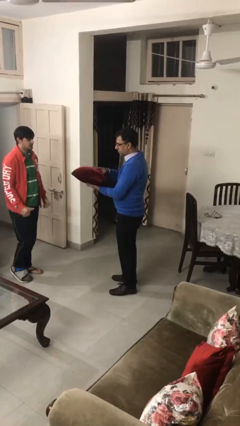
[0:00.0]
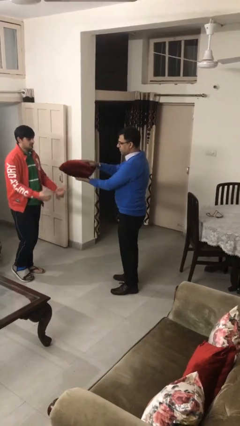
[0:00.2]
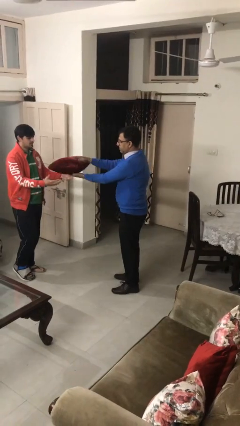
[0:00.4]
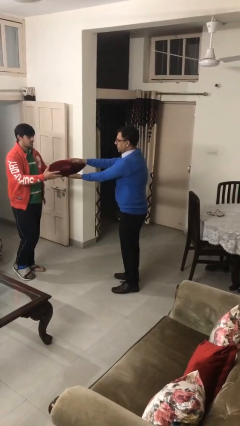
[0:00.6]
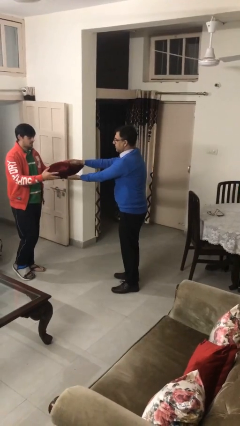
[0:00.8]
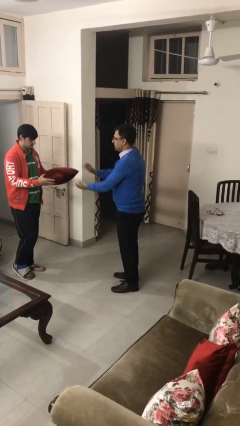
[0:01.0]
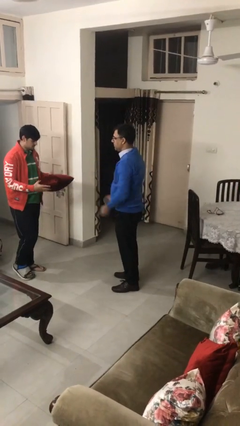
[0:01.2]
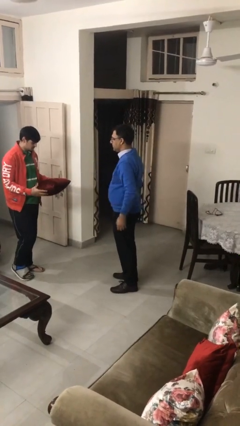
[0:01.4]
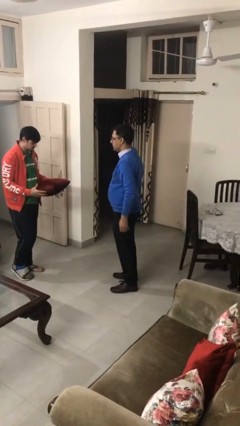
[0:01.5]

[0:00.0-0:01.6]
person transfers object to person

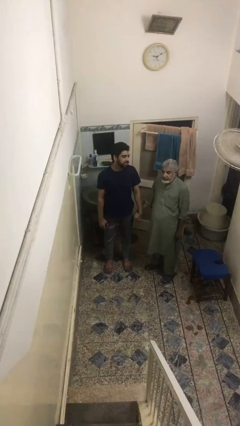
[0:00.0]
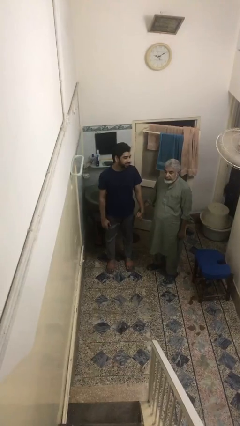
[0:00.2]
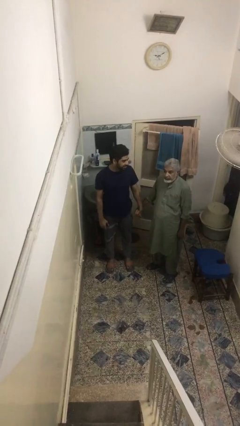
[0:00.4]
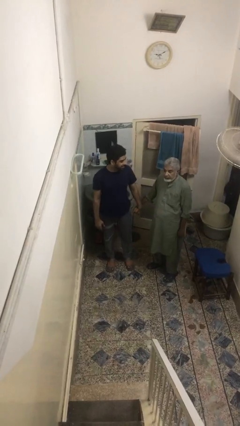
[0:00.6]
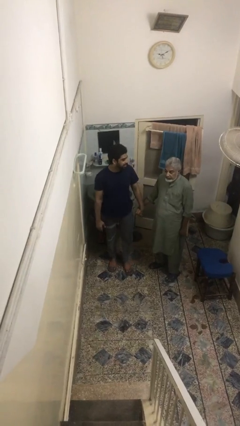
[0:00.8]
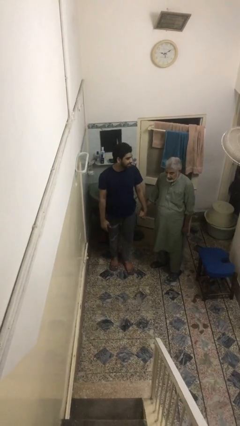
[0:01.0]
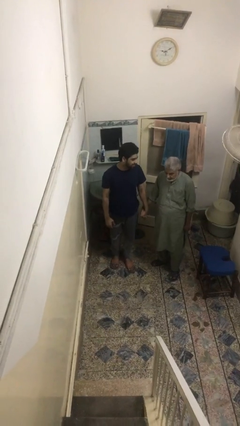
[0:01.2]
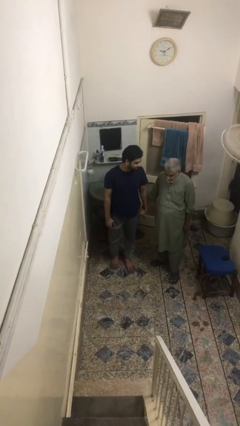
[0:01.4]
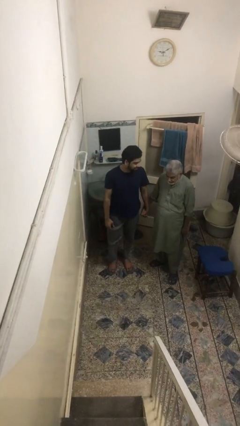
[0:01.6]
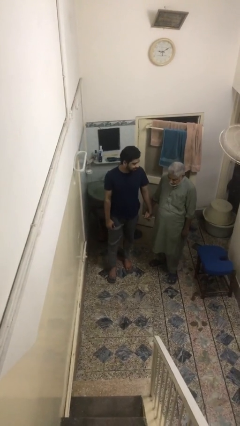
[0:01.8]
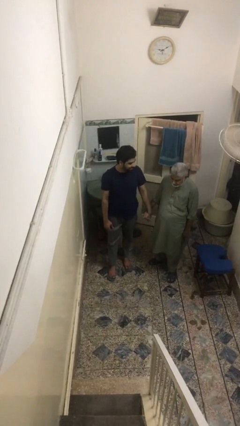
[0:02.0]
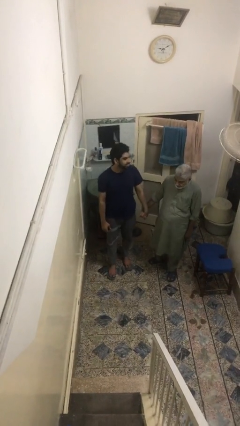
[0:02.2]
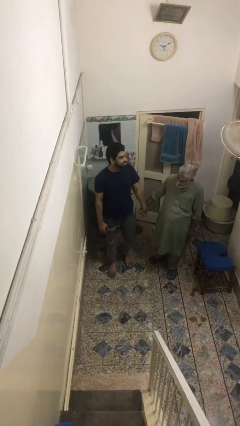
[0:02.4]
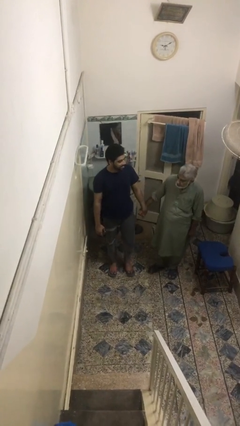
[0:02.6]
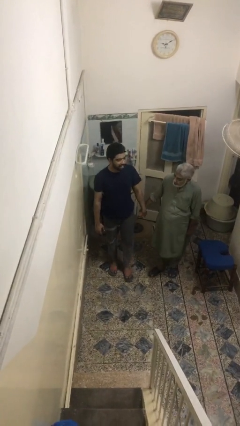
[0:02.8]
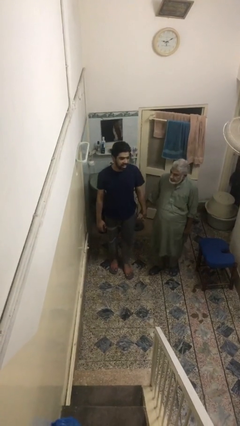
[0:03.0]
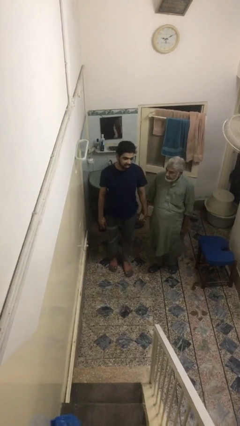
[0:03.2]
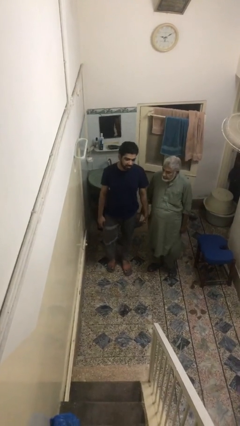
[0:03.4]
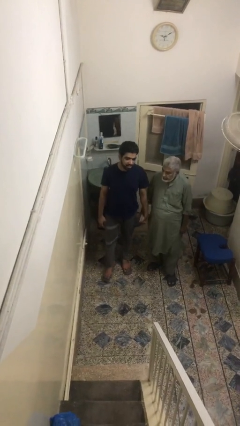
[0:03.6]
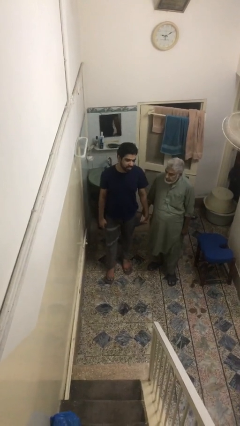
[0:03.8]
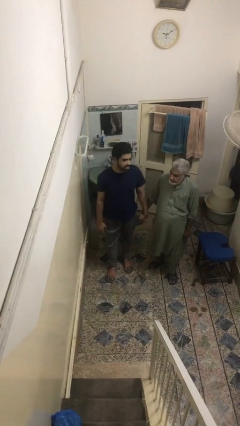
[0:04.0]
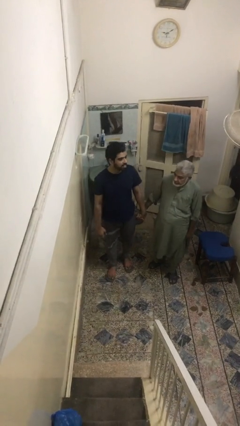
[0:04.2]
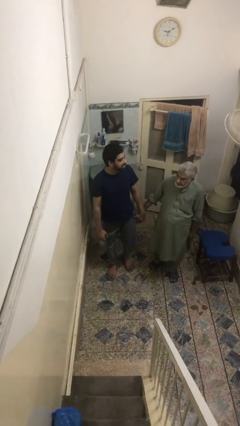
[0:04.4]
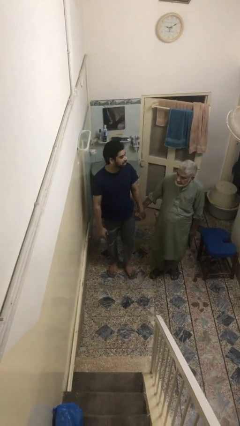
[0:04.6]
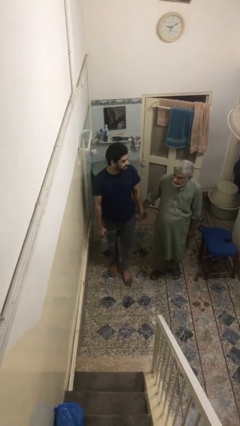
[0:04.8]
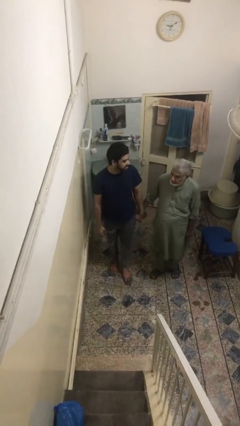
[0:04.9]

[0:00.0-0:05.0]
person holds hand

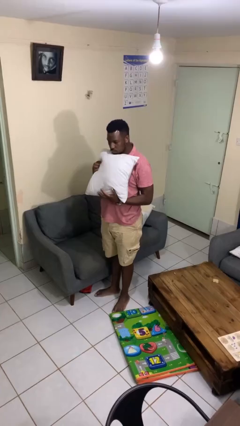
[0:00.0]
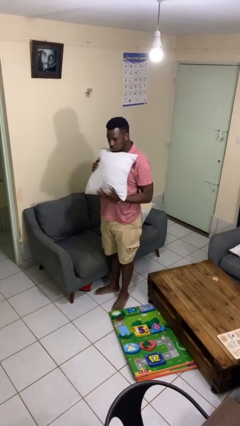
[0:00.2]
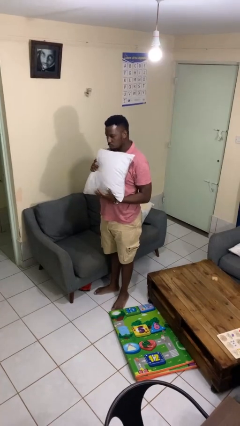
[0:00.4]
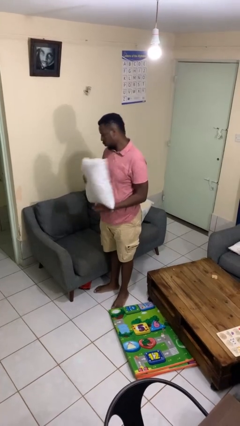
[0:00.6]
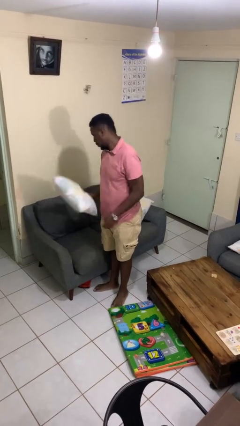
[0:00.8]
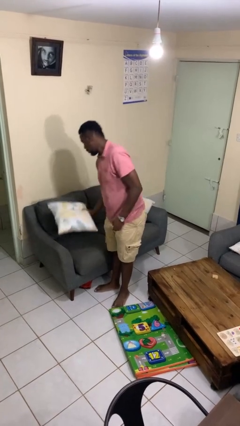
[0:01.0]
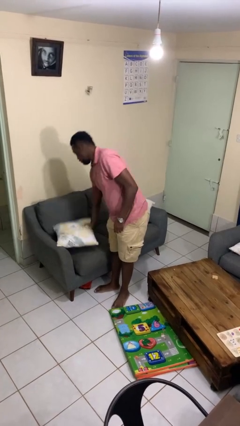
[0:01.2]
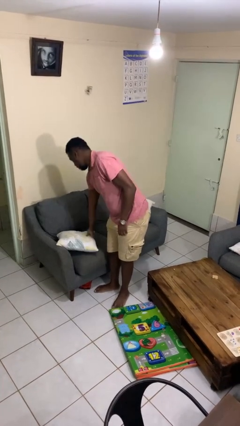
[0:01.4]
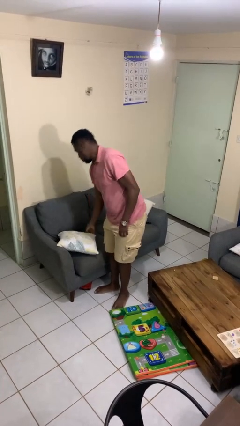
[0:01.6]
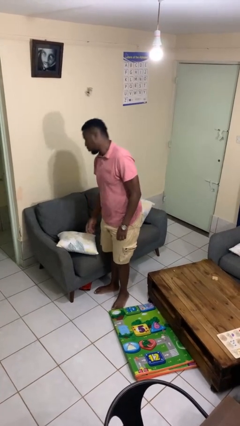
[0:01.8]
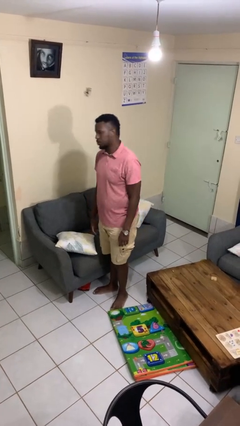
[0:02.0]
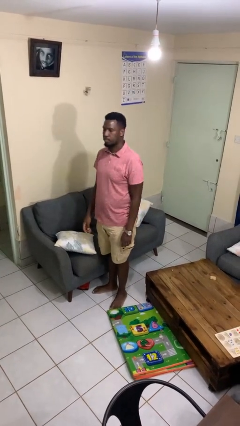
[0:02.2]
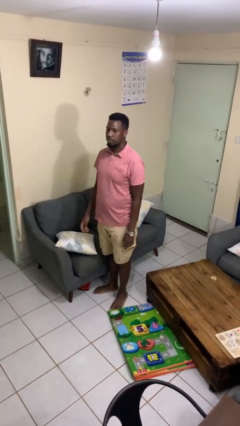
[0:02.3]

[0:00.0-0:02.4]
person puts down object on couch

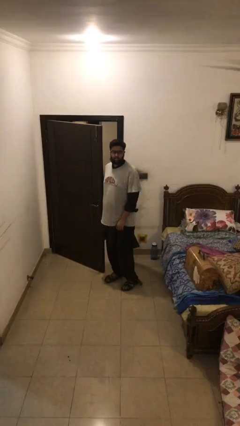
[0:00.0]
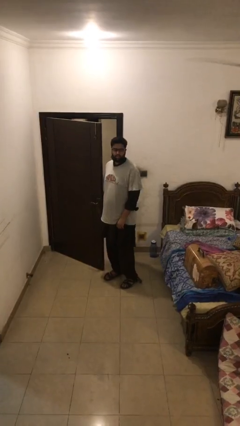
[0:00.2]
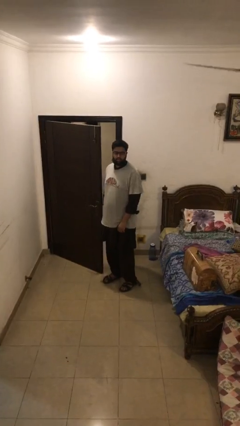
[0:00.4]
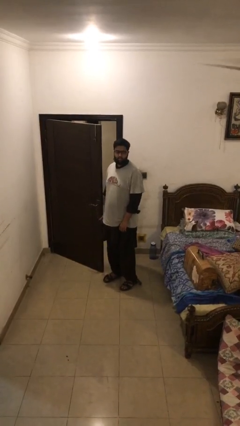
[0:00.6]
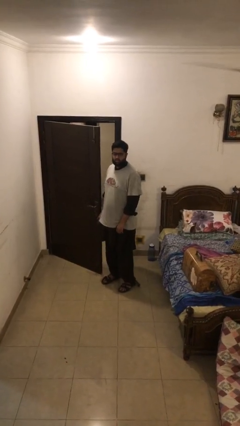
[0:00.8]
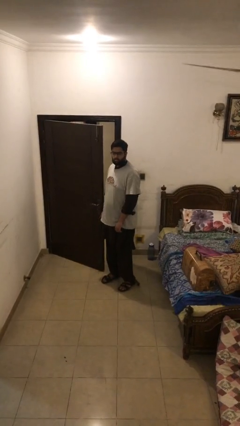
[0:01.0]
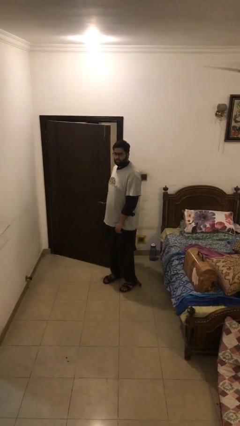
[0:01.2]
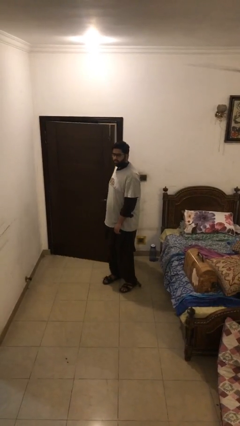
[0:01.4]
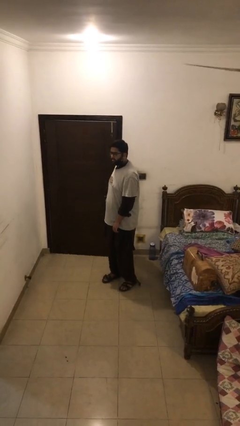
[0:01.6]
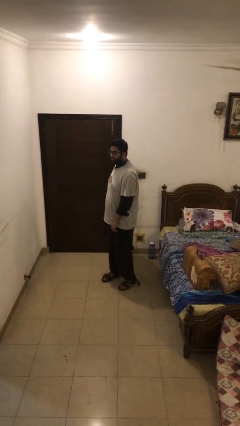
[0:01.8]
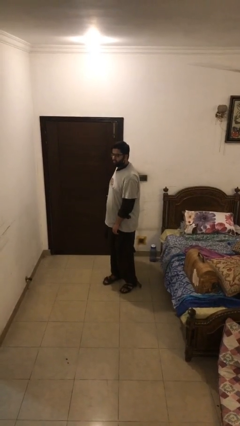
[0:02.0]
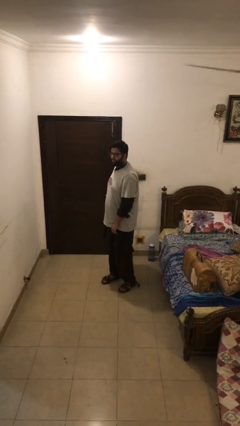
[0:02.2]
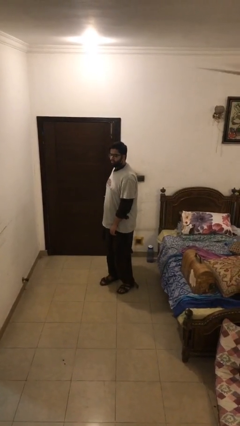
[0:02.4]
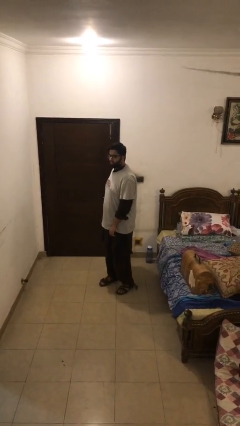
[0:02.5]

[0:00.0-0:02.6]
person closes facility door

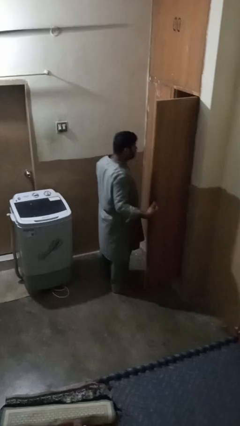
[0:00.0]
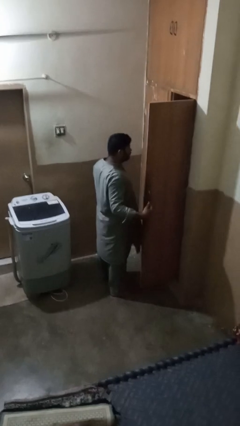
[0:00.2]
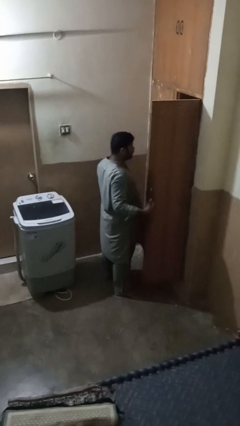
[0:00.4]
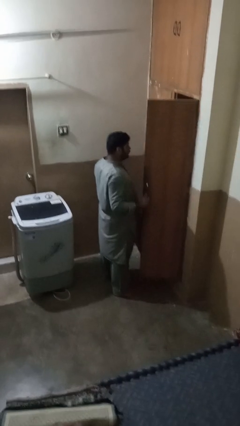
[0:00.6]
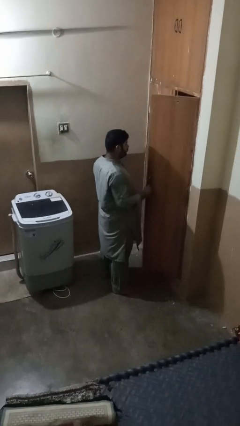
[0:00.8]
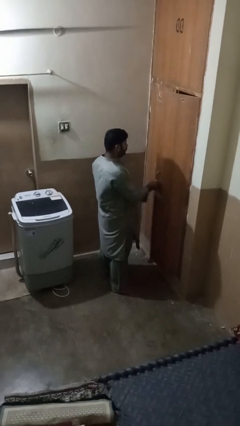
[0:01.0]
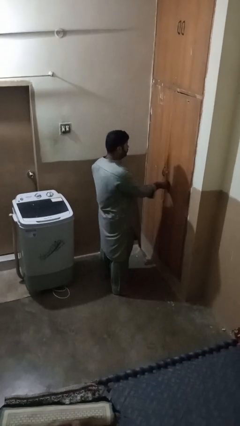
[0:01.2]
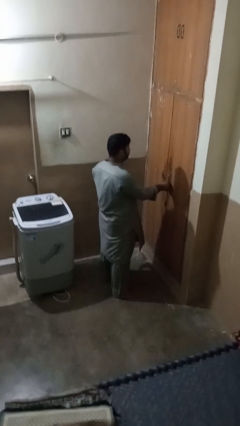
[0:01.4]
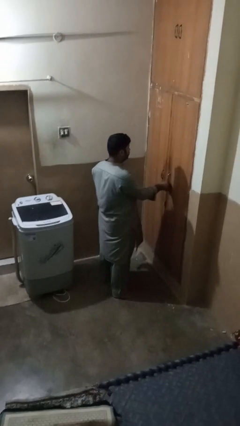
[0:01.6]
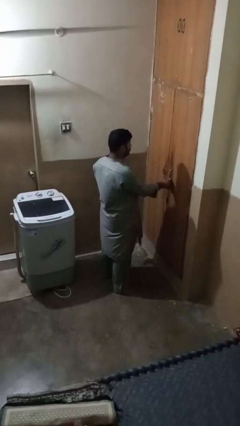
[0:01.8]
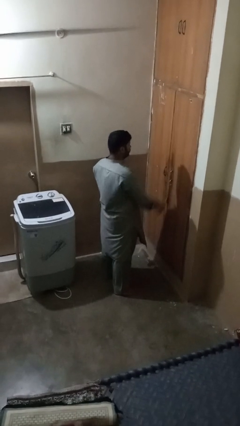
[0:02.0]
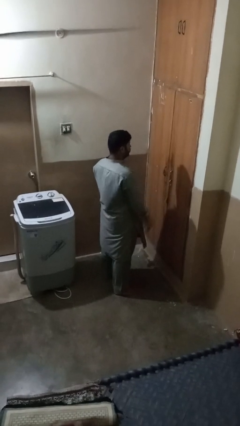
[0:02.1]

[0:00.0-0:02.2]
person closes closet door

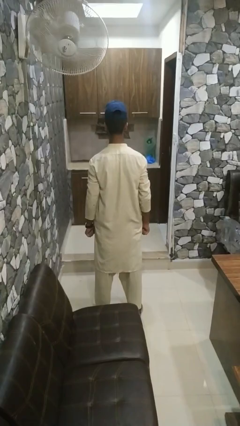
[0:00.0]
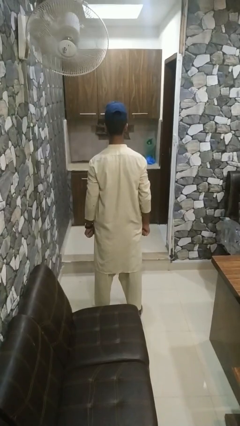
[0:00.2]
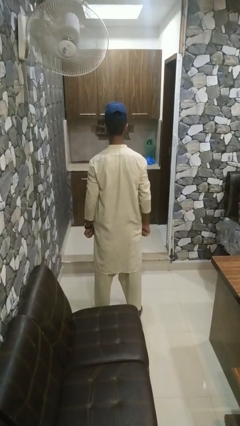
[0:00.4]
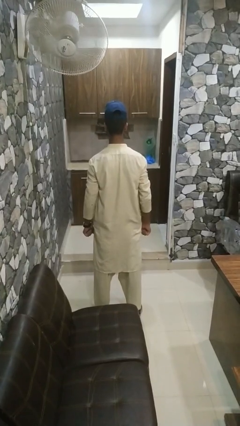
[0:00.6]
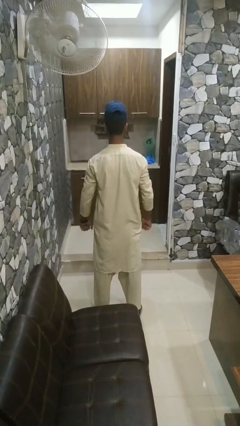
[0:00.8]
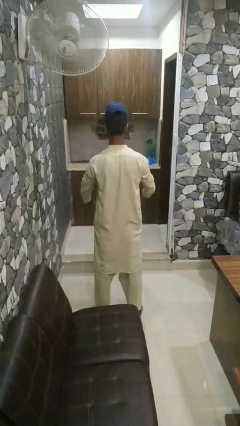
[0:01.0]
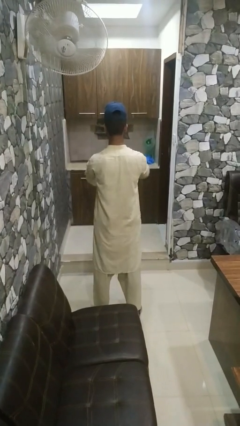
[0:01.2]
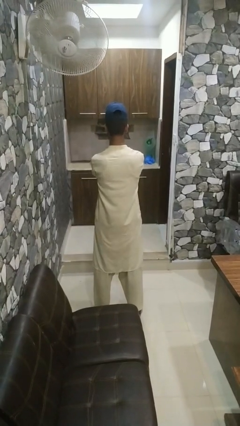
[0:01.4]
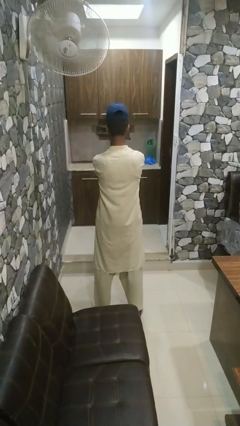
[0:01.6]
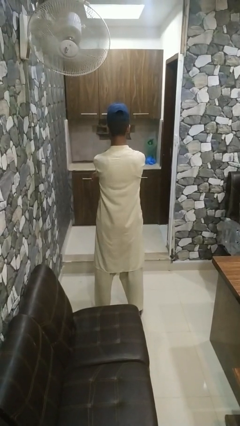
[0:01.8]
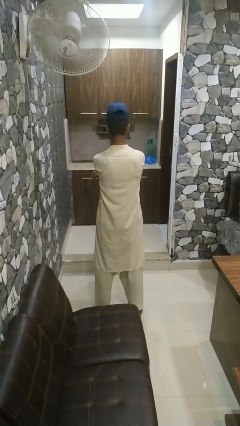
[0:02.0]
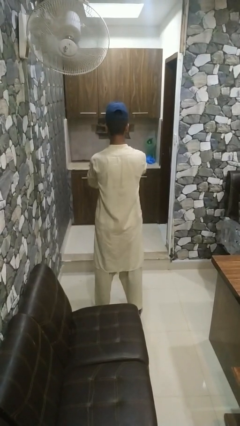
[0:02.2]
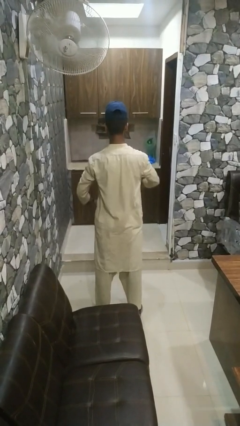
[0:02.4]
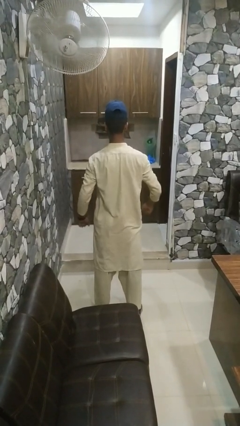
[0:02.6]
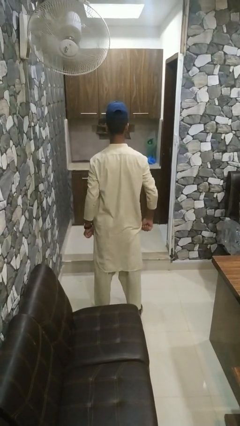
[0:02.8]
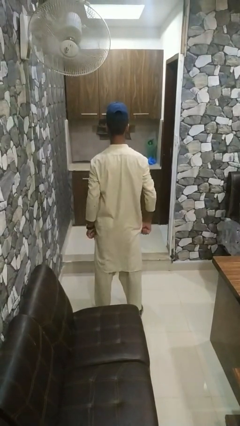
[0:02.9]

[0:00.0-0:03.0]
person crosses arms

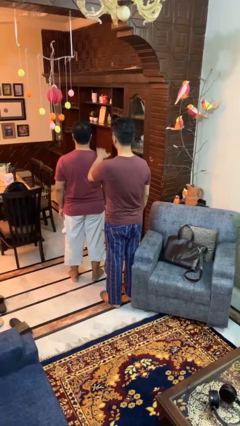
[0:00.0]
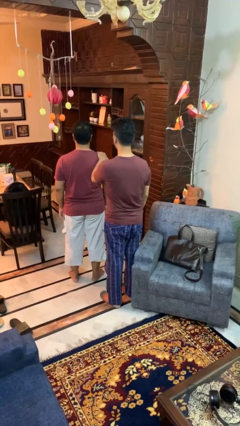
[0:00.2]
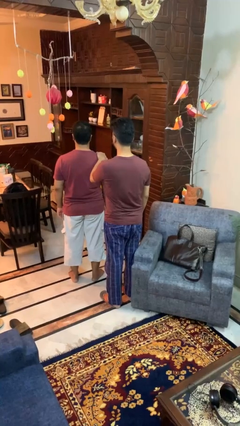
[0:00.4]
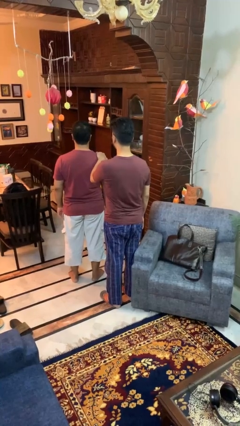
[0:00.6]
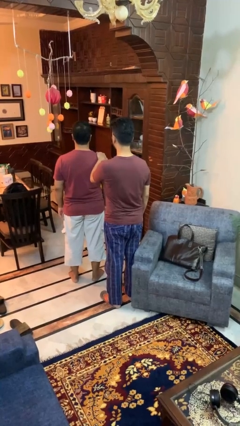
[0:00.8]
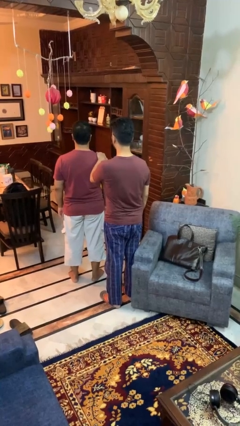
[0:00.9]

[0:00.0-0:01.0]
person grabs person by shoulder
